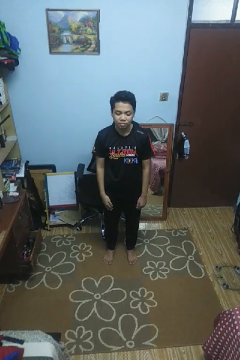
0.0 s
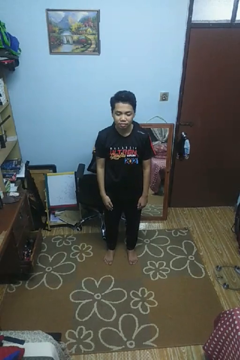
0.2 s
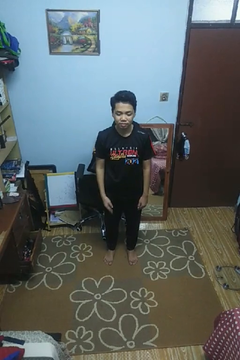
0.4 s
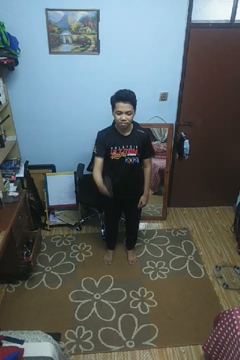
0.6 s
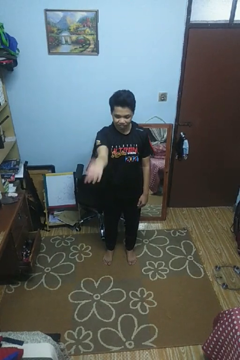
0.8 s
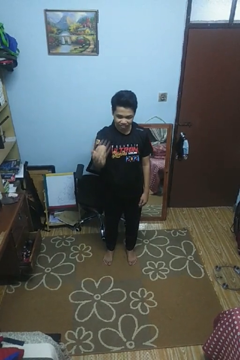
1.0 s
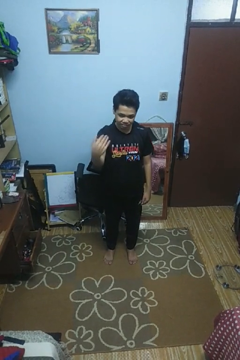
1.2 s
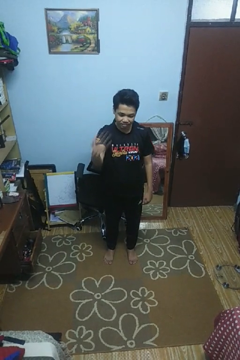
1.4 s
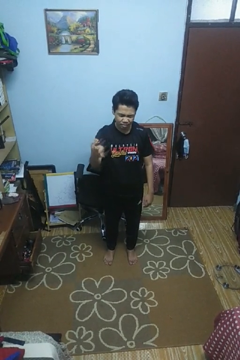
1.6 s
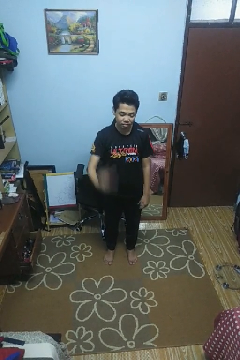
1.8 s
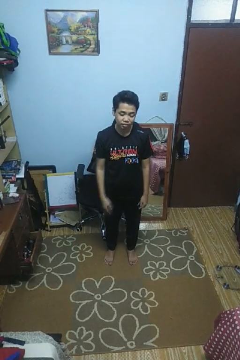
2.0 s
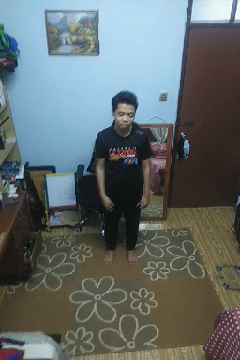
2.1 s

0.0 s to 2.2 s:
person gestures come here

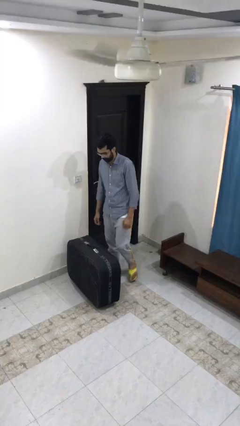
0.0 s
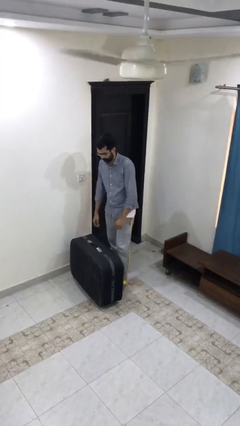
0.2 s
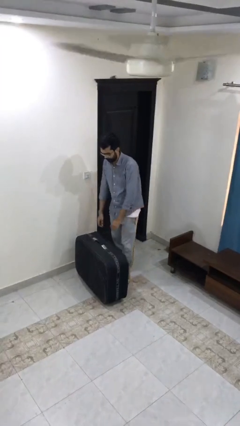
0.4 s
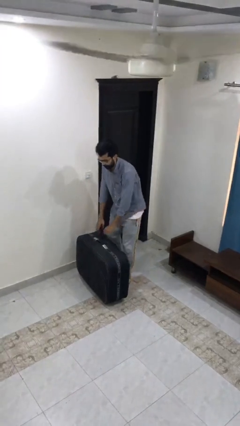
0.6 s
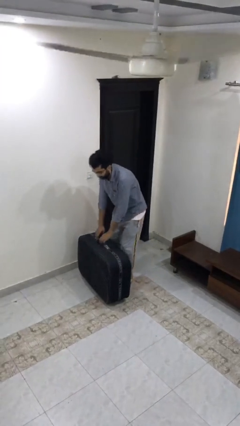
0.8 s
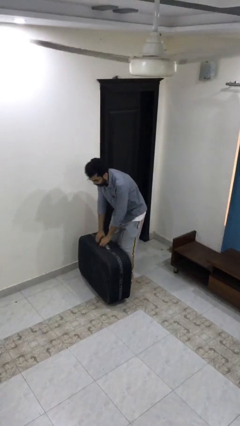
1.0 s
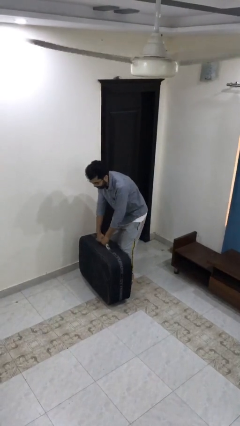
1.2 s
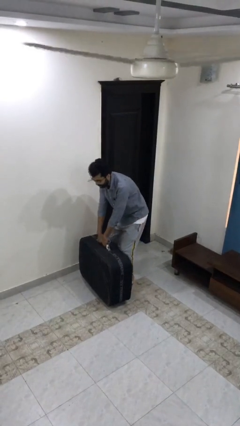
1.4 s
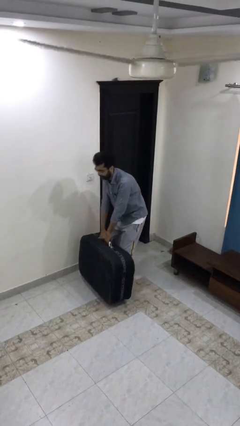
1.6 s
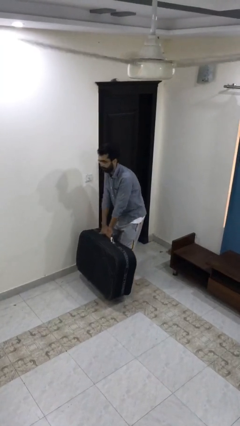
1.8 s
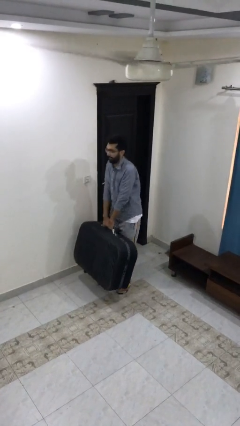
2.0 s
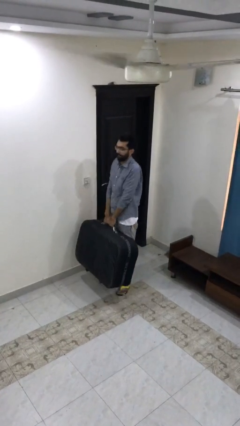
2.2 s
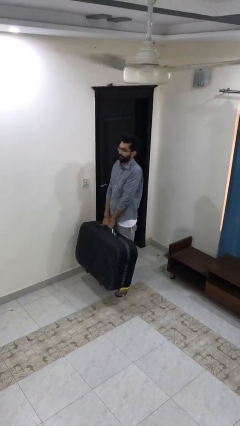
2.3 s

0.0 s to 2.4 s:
person picks up object from floor

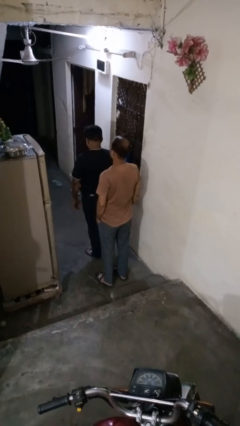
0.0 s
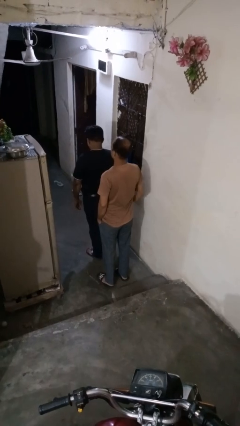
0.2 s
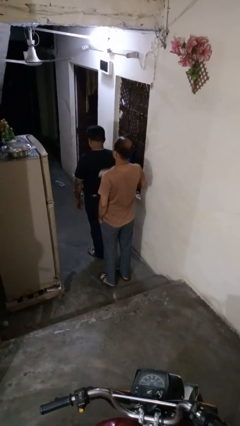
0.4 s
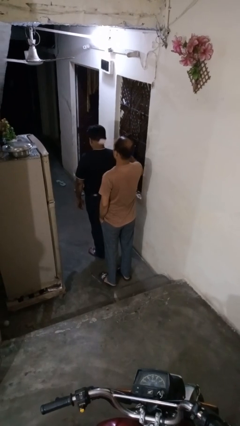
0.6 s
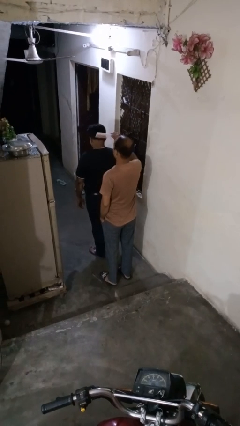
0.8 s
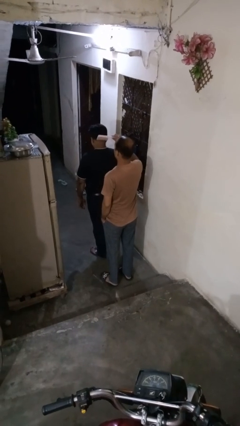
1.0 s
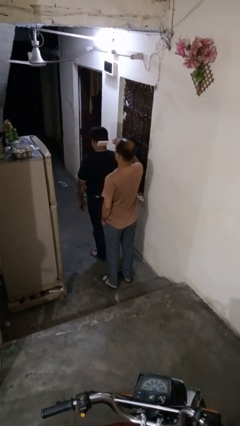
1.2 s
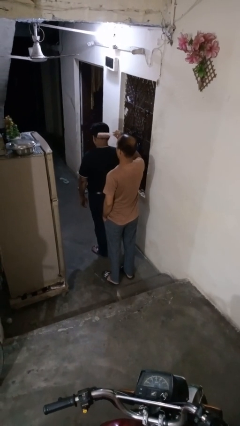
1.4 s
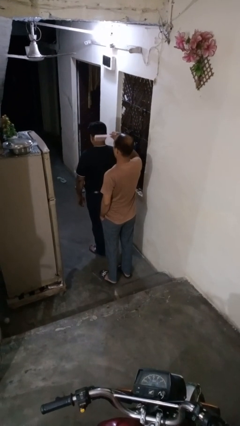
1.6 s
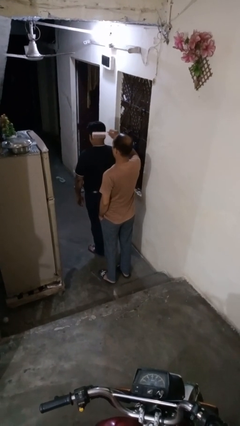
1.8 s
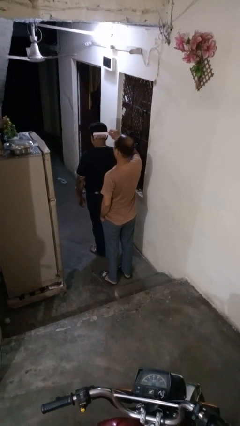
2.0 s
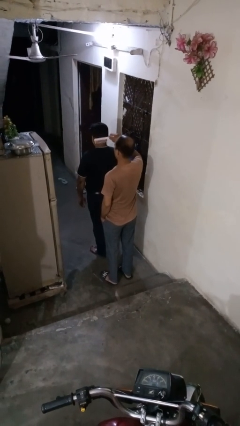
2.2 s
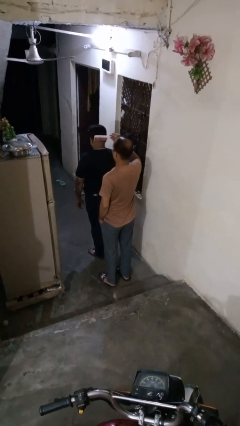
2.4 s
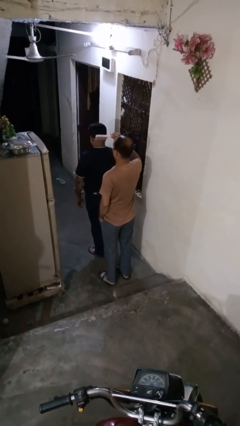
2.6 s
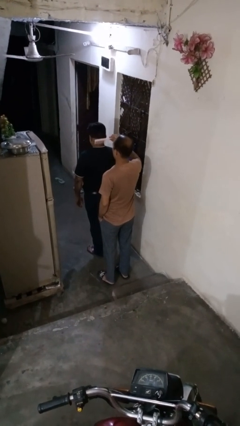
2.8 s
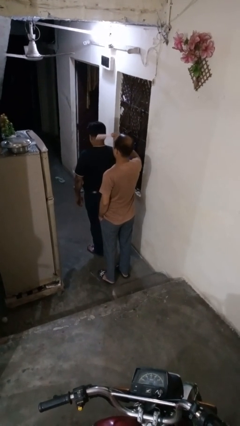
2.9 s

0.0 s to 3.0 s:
person brushes hair of person

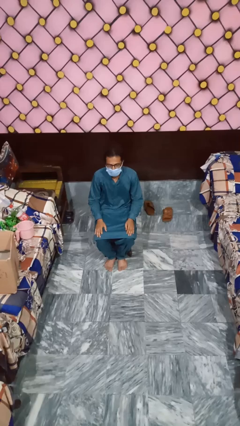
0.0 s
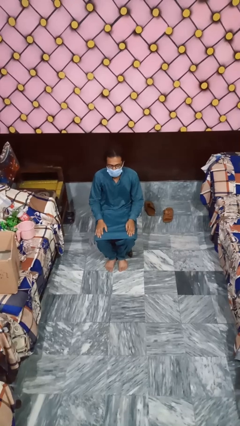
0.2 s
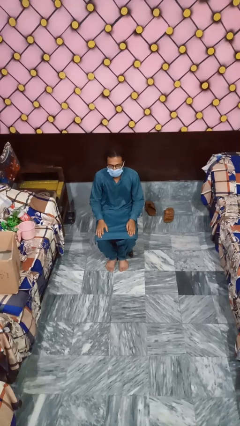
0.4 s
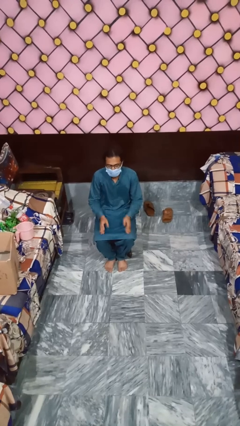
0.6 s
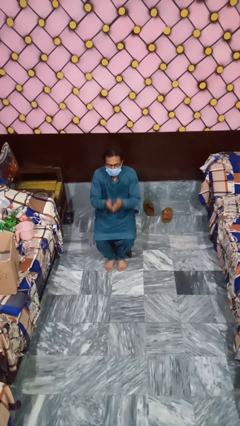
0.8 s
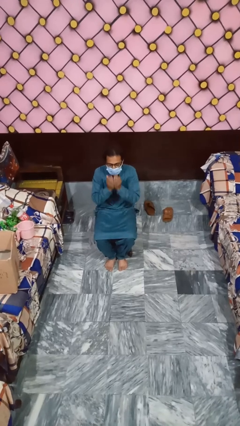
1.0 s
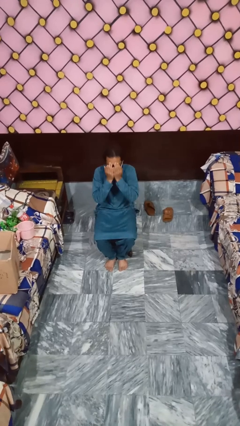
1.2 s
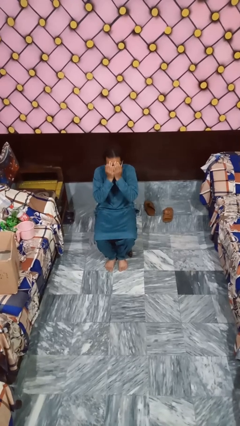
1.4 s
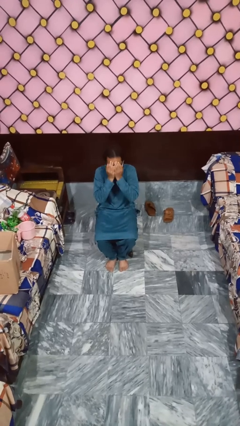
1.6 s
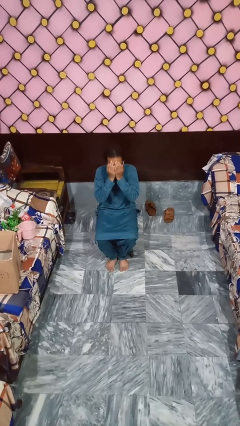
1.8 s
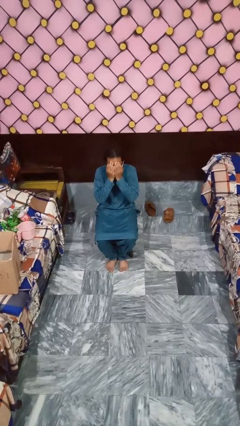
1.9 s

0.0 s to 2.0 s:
person covers face with hands

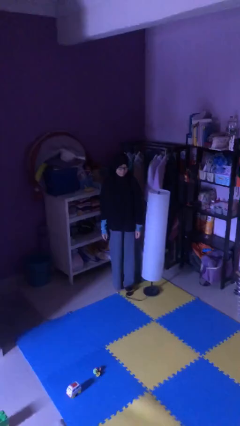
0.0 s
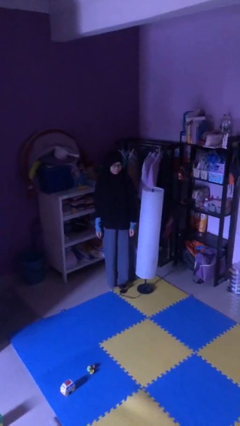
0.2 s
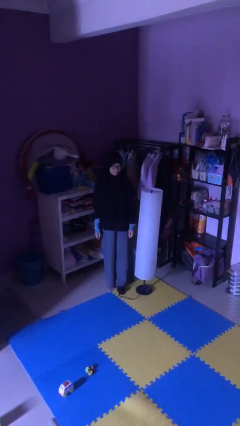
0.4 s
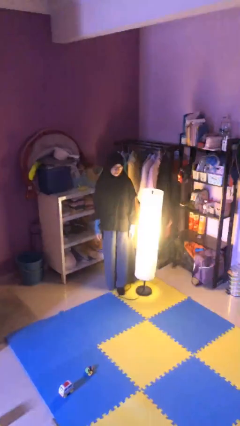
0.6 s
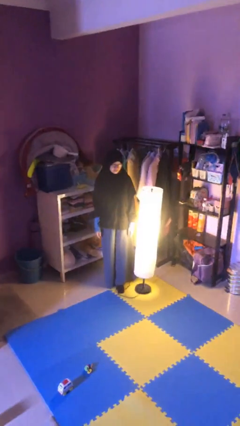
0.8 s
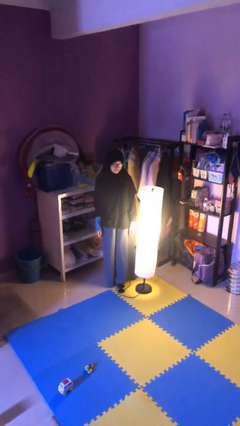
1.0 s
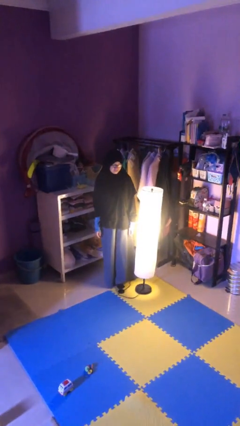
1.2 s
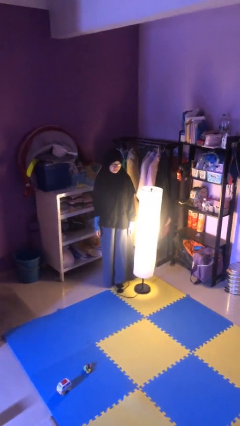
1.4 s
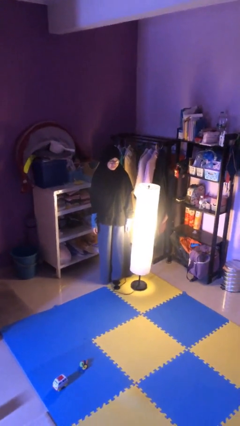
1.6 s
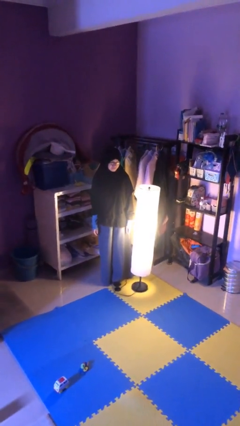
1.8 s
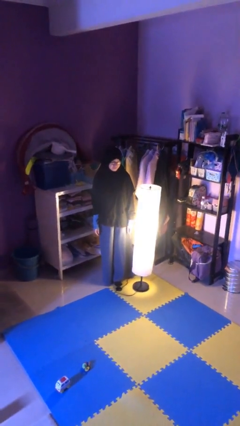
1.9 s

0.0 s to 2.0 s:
person turns on lamp

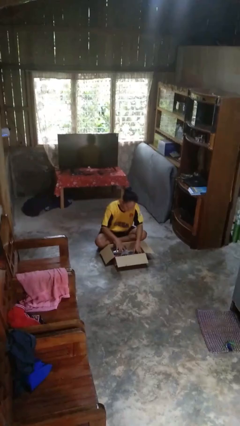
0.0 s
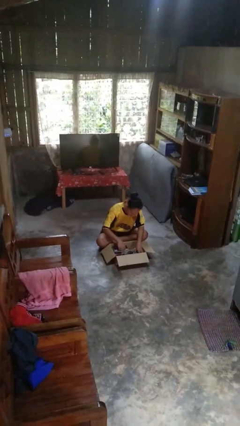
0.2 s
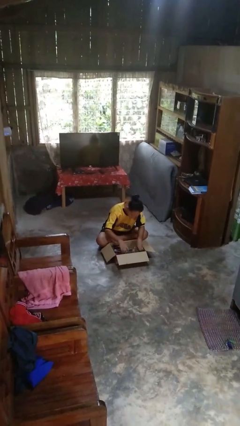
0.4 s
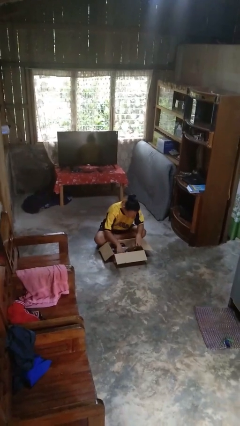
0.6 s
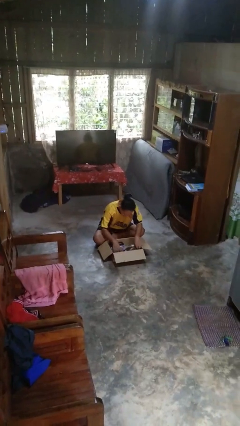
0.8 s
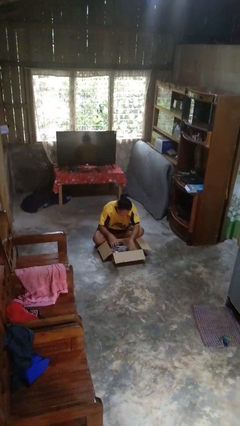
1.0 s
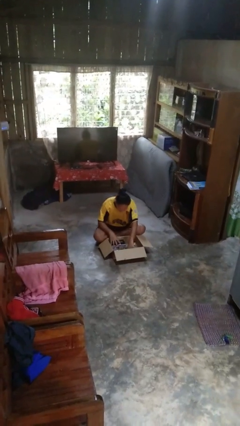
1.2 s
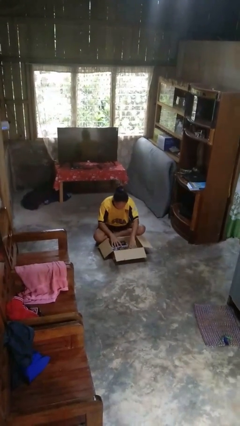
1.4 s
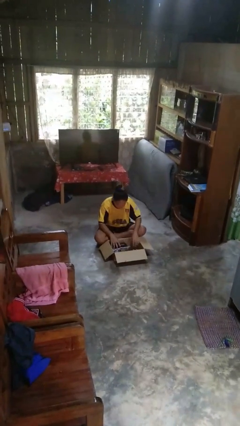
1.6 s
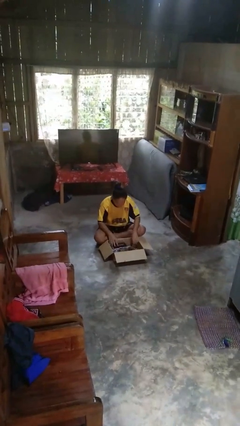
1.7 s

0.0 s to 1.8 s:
person searches in box

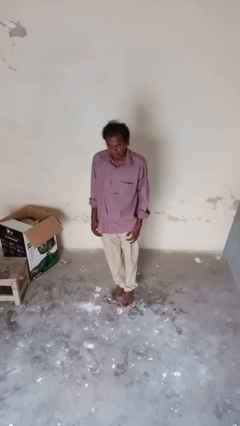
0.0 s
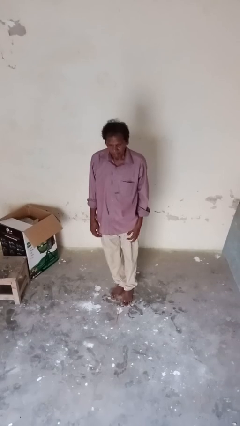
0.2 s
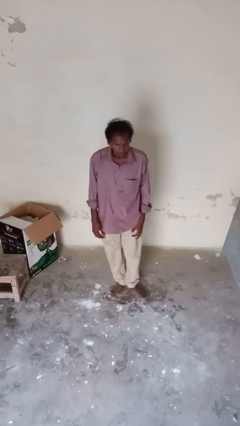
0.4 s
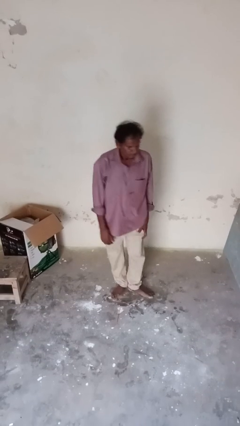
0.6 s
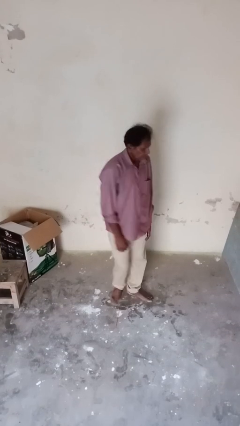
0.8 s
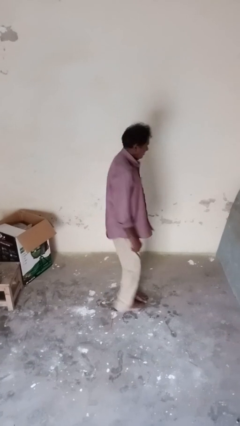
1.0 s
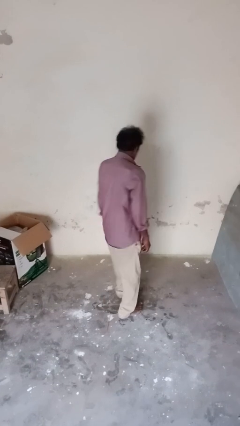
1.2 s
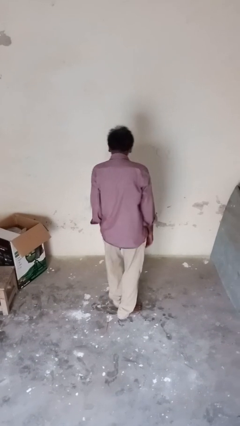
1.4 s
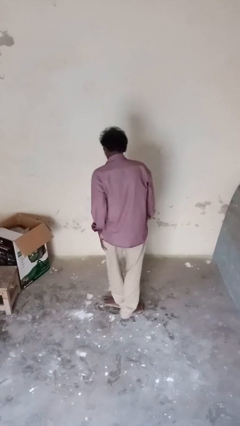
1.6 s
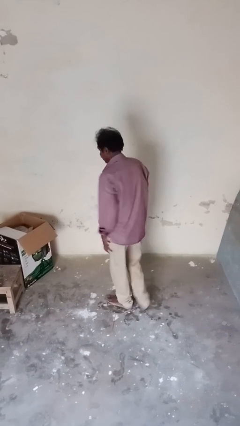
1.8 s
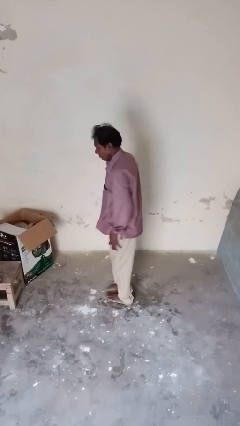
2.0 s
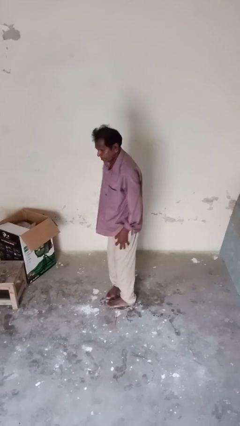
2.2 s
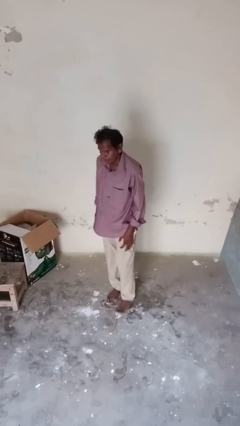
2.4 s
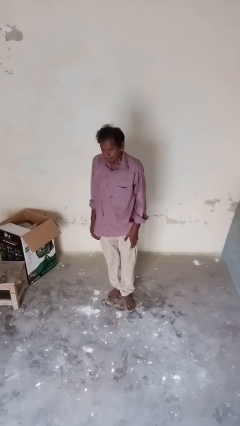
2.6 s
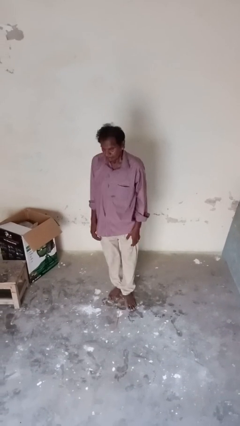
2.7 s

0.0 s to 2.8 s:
person twirls

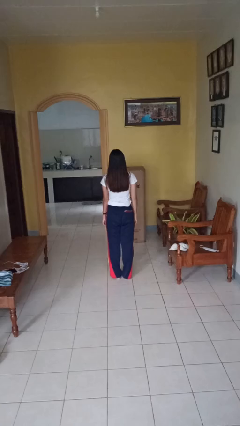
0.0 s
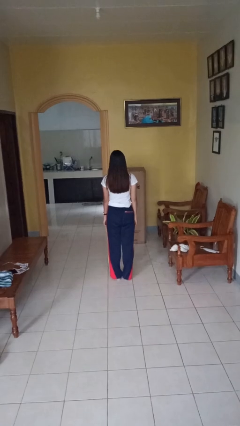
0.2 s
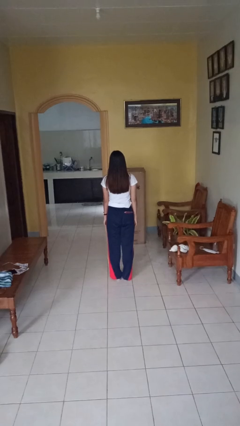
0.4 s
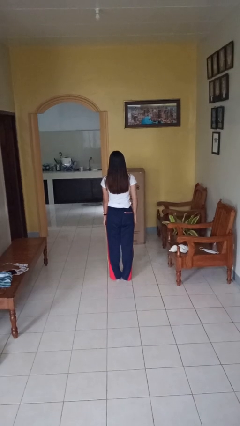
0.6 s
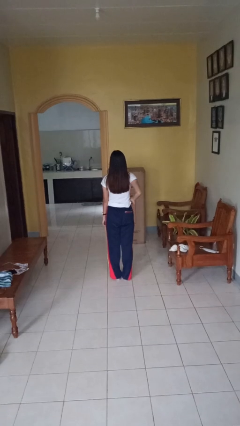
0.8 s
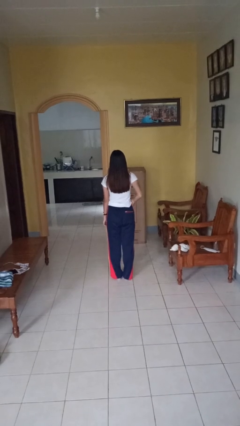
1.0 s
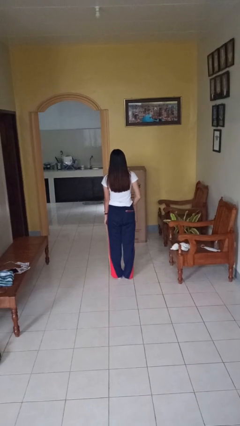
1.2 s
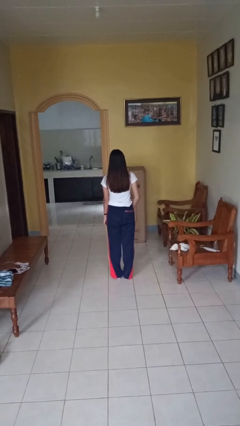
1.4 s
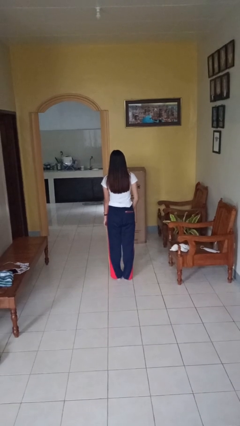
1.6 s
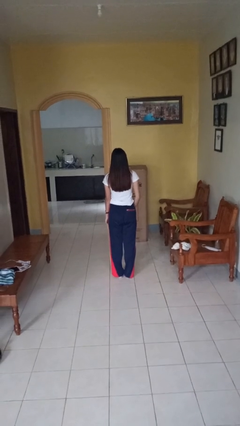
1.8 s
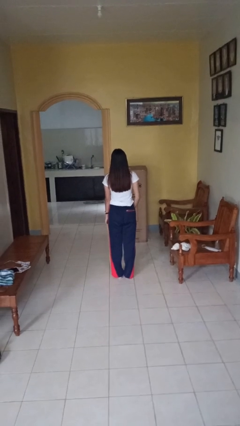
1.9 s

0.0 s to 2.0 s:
person puts hands in back pockets
